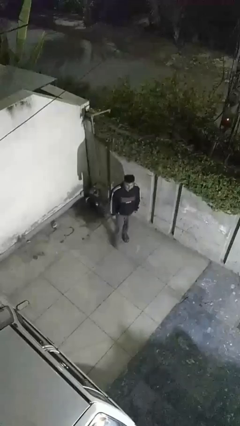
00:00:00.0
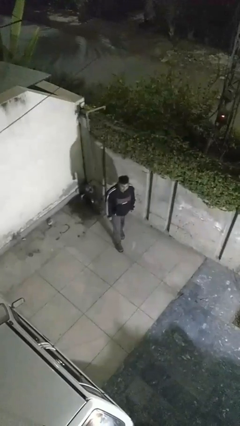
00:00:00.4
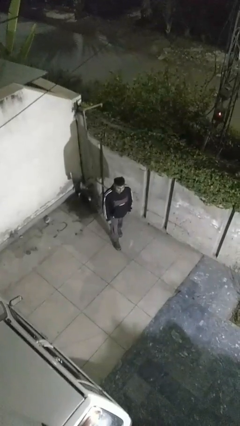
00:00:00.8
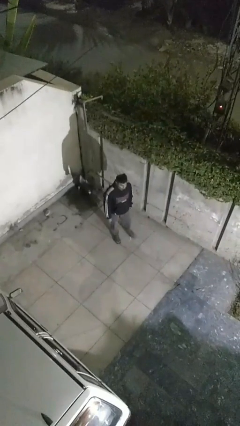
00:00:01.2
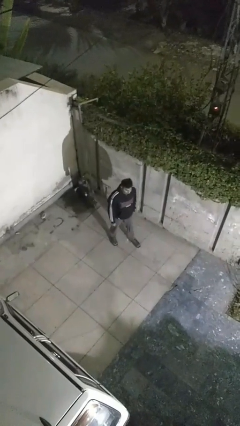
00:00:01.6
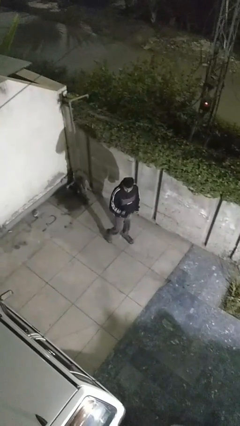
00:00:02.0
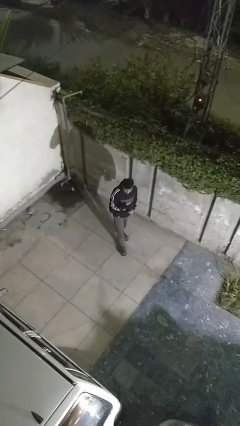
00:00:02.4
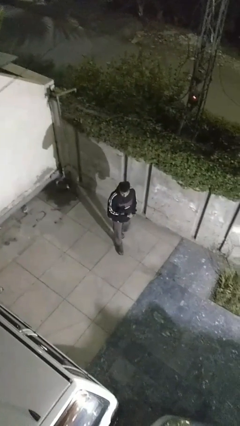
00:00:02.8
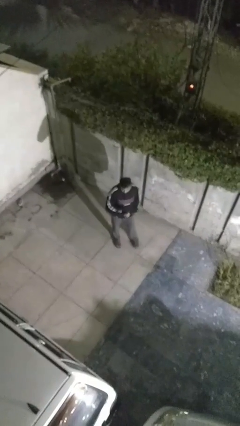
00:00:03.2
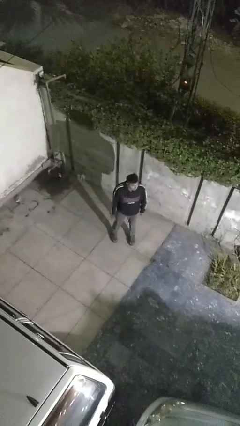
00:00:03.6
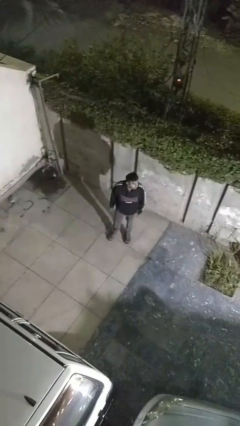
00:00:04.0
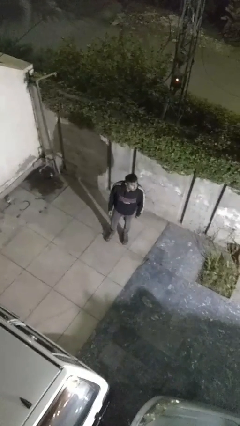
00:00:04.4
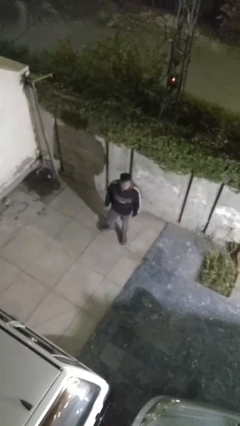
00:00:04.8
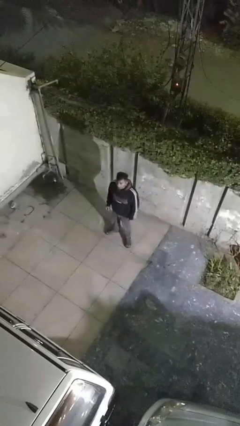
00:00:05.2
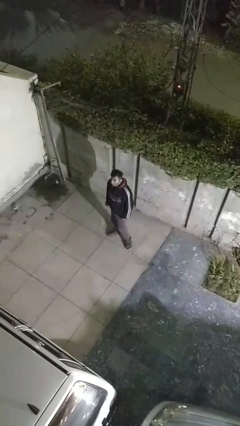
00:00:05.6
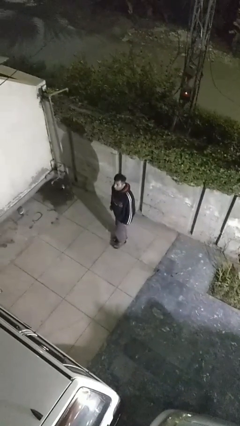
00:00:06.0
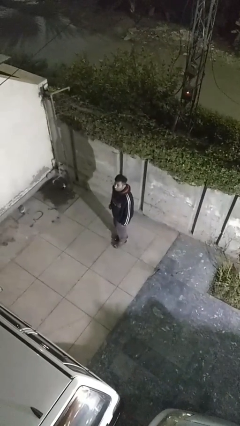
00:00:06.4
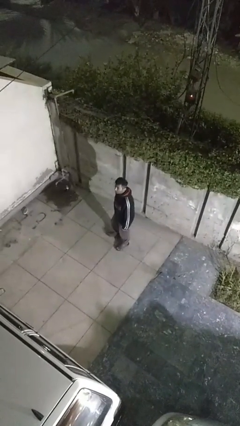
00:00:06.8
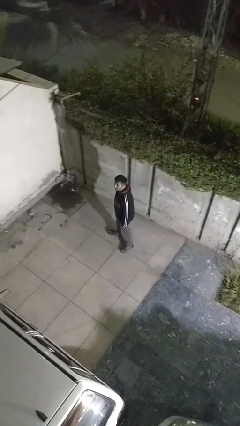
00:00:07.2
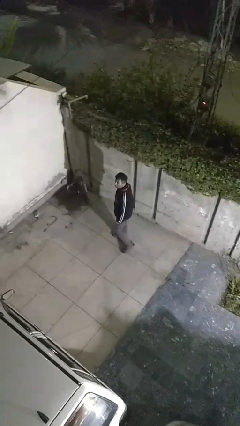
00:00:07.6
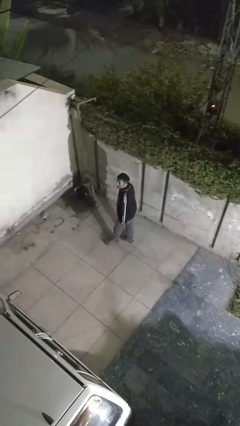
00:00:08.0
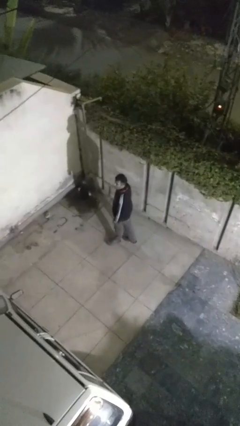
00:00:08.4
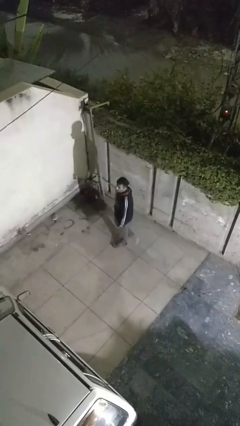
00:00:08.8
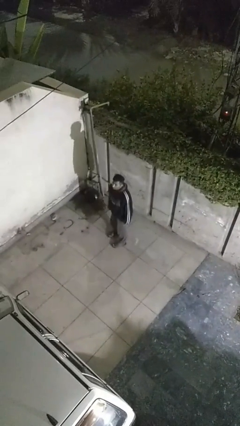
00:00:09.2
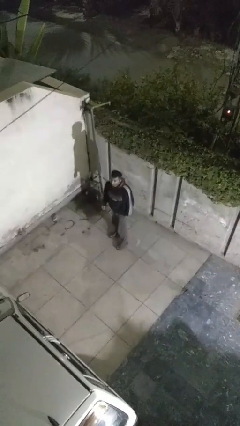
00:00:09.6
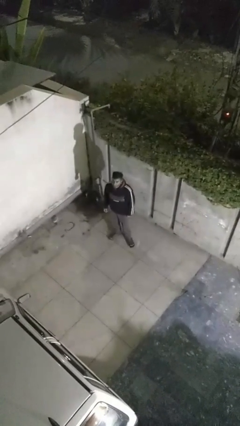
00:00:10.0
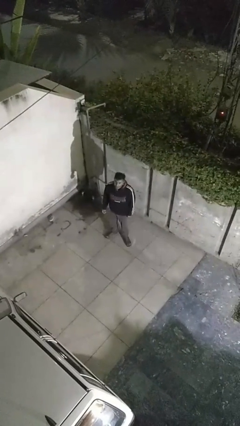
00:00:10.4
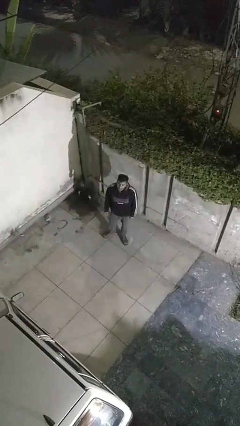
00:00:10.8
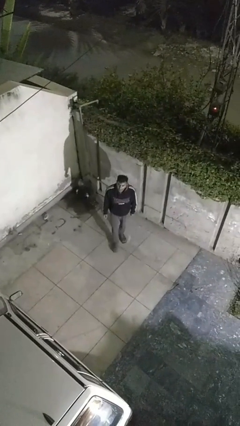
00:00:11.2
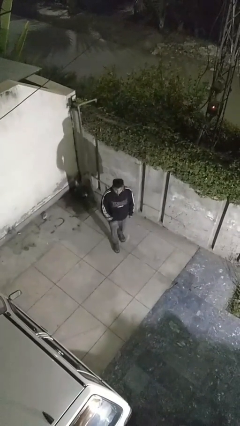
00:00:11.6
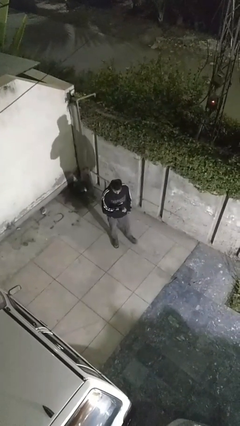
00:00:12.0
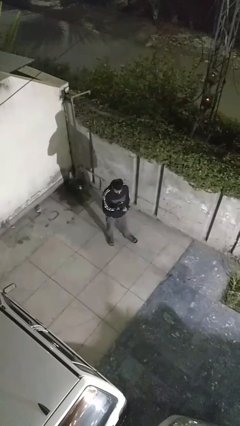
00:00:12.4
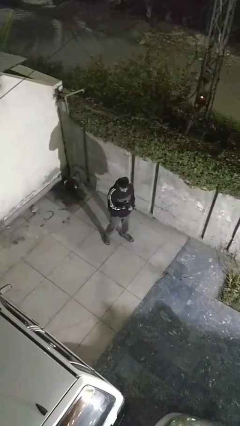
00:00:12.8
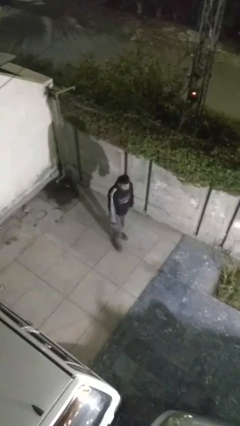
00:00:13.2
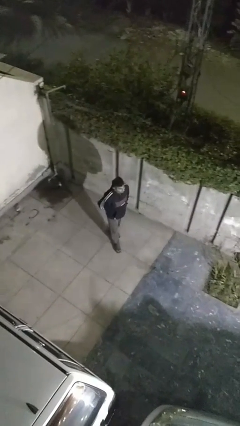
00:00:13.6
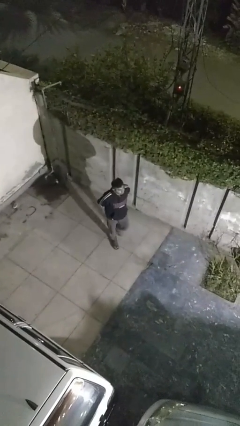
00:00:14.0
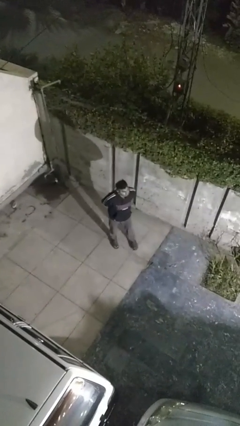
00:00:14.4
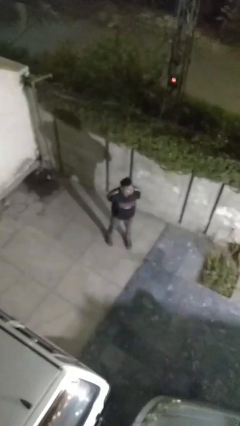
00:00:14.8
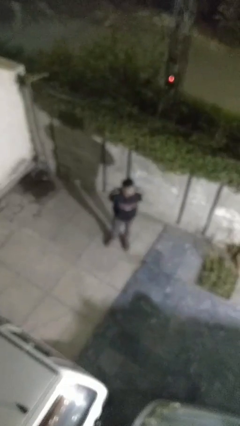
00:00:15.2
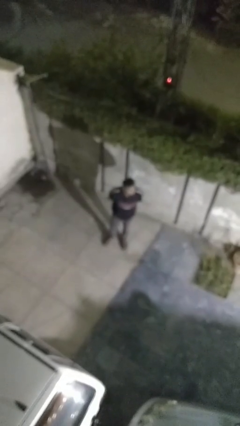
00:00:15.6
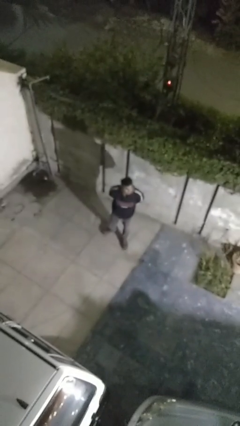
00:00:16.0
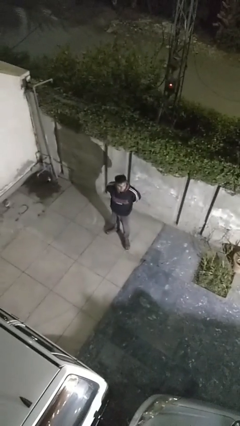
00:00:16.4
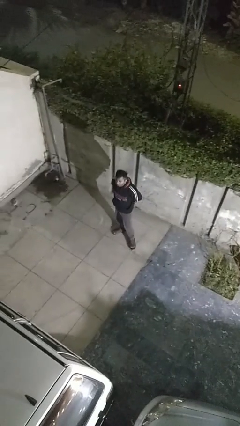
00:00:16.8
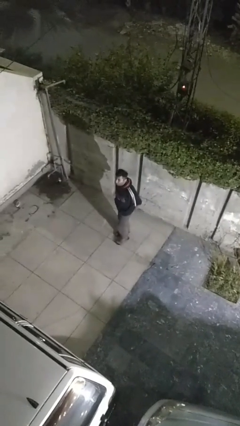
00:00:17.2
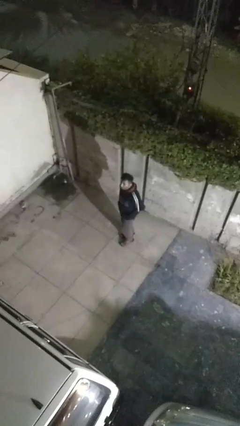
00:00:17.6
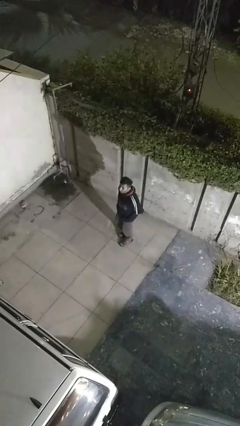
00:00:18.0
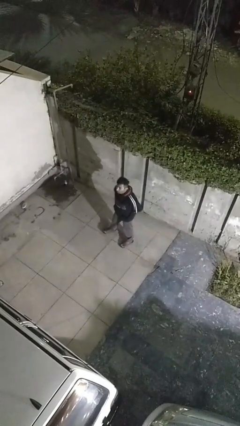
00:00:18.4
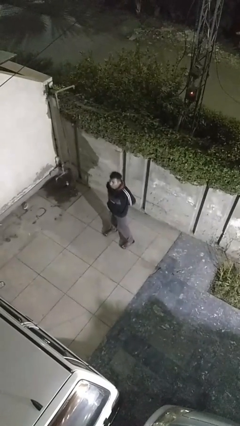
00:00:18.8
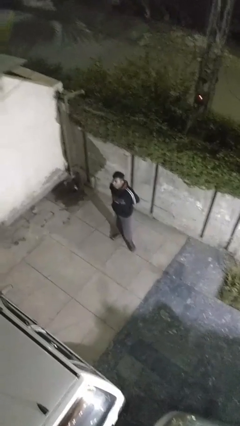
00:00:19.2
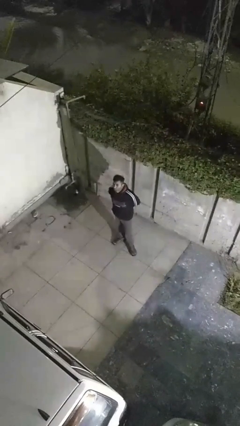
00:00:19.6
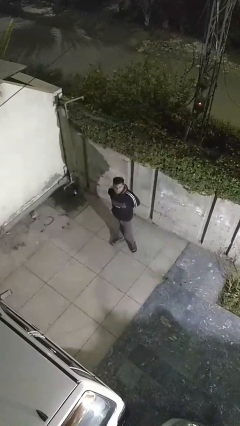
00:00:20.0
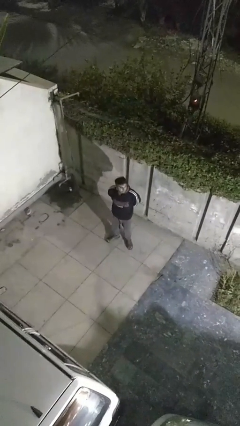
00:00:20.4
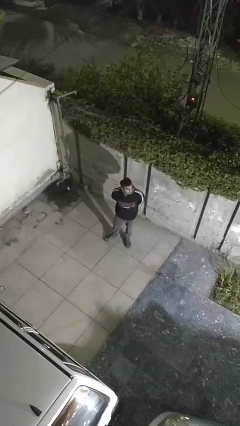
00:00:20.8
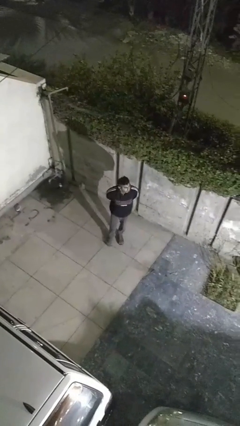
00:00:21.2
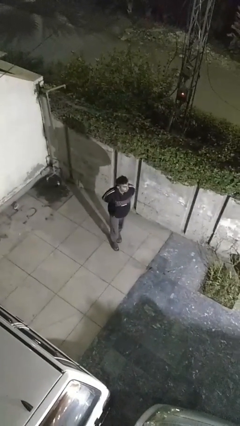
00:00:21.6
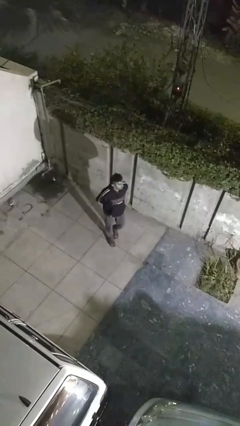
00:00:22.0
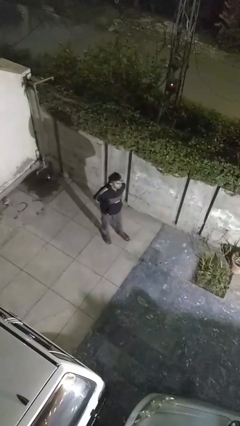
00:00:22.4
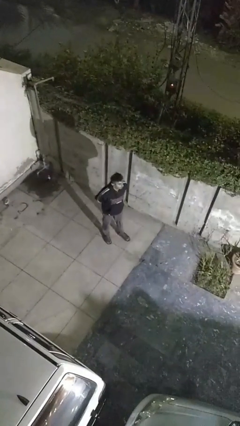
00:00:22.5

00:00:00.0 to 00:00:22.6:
person walks

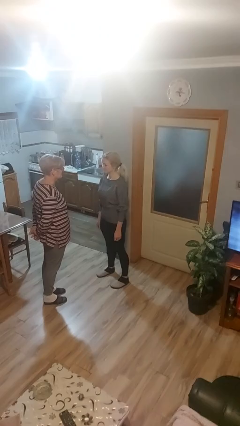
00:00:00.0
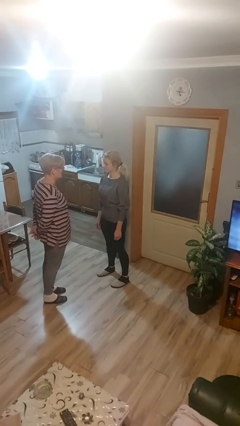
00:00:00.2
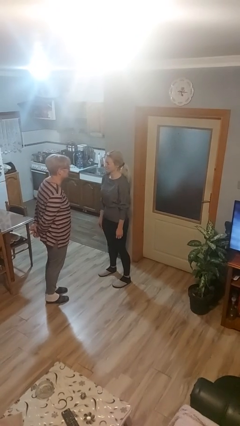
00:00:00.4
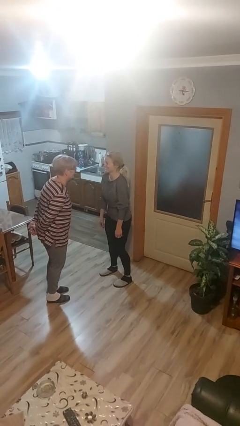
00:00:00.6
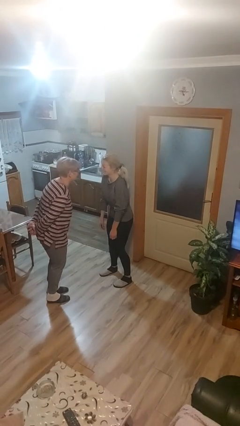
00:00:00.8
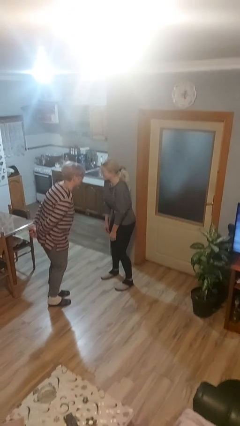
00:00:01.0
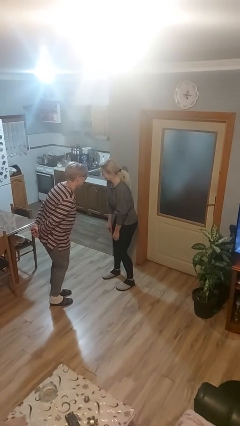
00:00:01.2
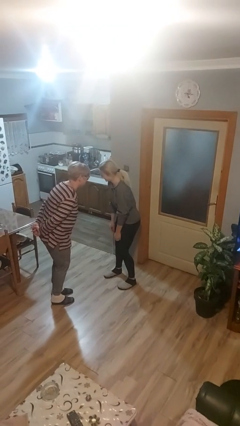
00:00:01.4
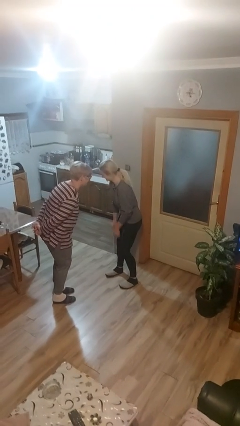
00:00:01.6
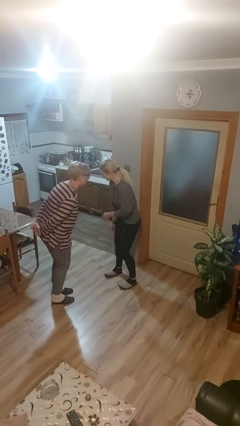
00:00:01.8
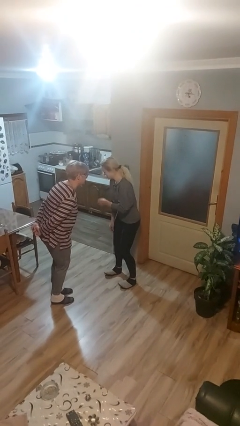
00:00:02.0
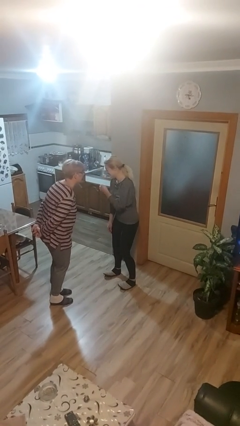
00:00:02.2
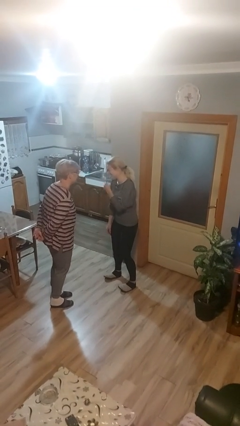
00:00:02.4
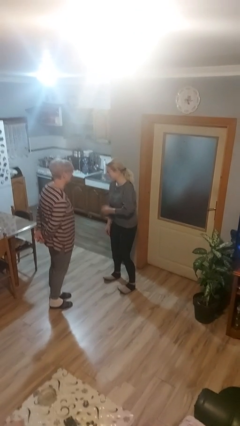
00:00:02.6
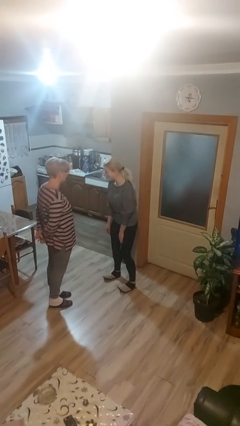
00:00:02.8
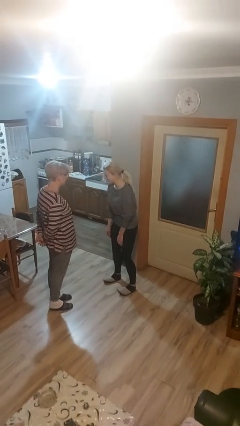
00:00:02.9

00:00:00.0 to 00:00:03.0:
person laughs with person

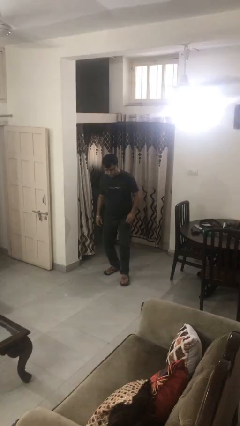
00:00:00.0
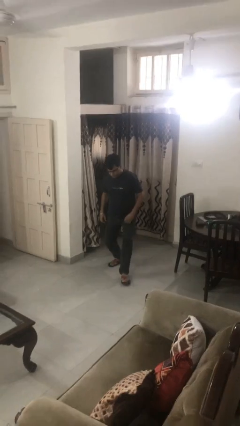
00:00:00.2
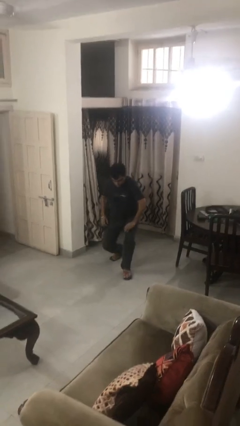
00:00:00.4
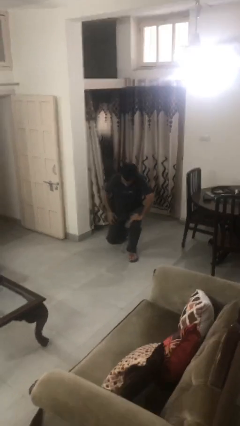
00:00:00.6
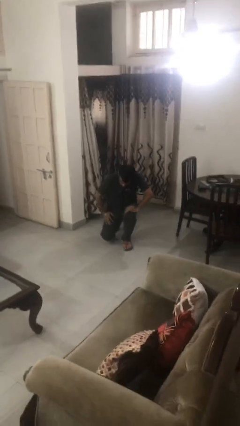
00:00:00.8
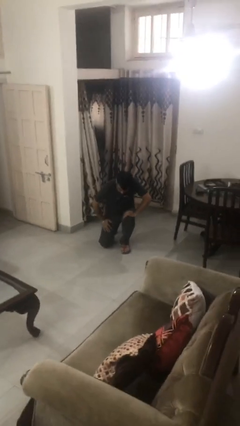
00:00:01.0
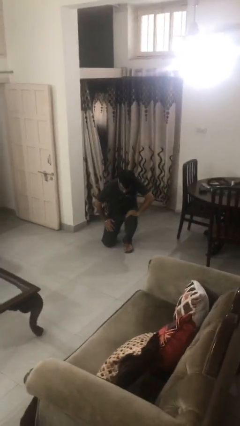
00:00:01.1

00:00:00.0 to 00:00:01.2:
person kneels

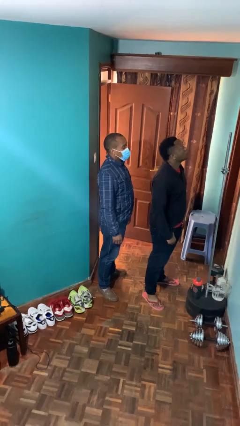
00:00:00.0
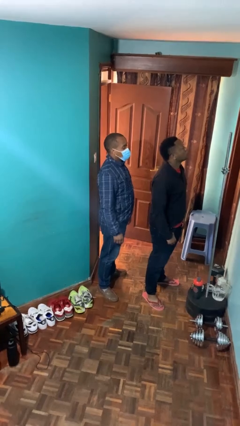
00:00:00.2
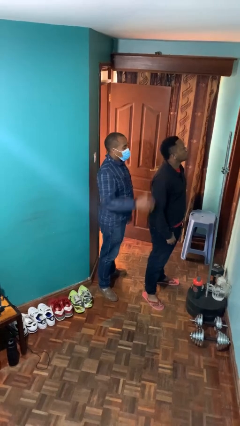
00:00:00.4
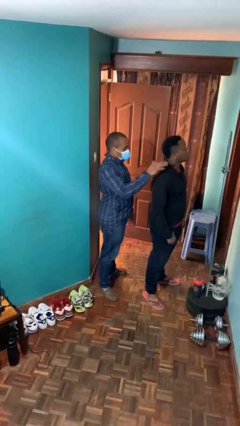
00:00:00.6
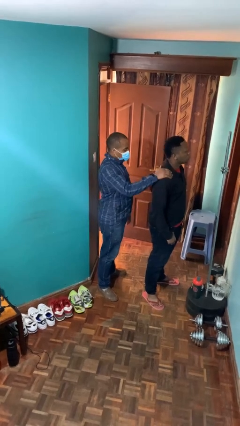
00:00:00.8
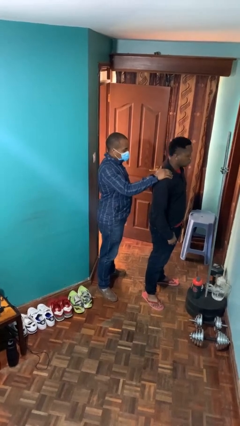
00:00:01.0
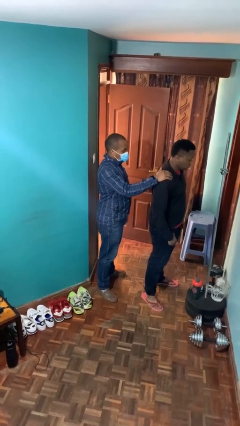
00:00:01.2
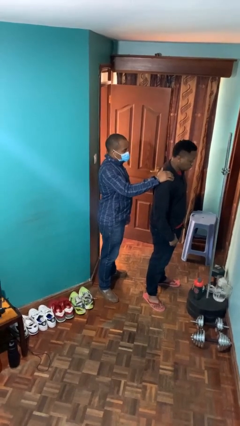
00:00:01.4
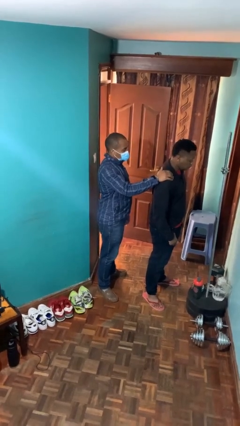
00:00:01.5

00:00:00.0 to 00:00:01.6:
person grabs person by shoulder

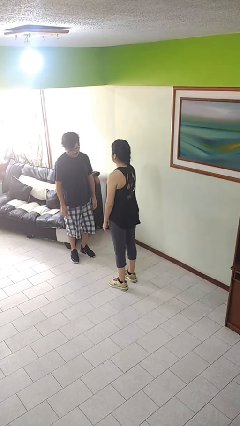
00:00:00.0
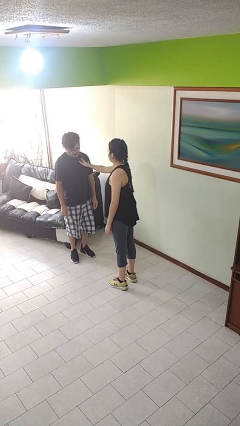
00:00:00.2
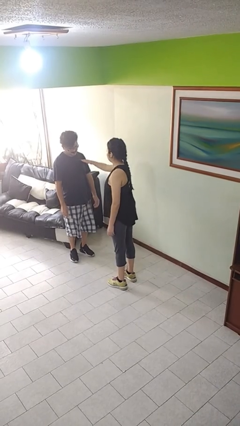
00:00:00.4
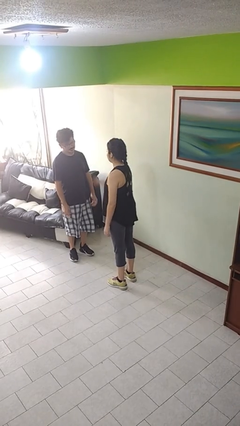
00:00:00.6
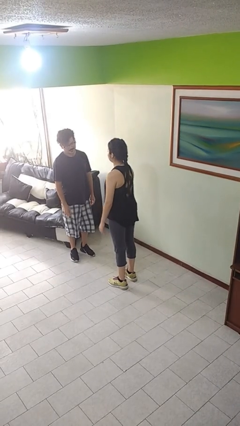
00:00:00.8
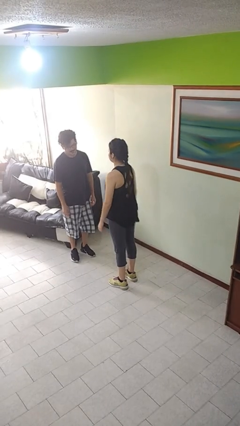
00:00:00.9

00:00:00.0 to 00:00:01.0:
person shoves person
